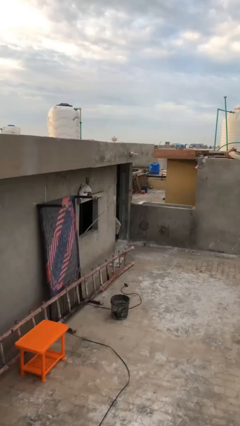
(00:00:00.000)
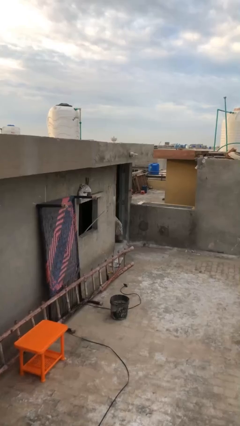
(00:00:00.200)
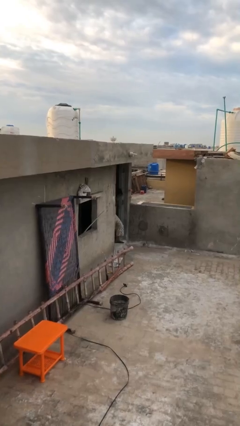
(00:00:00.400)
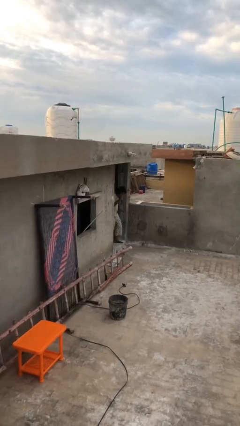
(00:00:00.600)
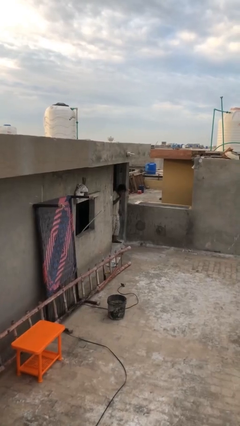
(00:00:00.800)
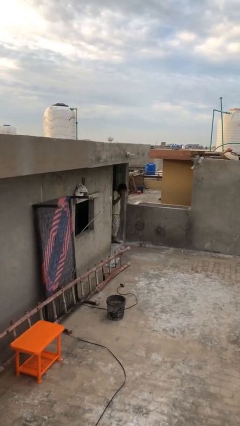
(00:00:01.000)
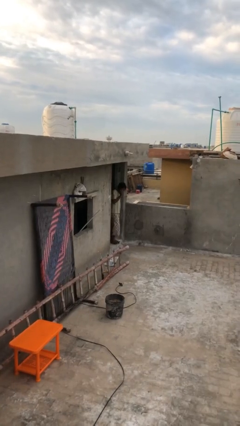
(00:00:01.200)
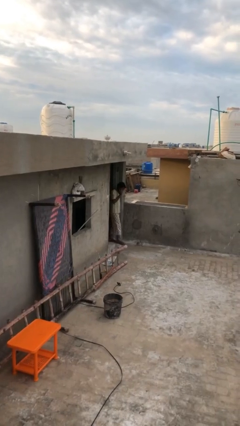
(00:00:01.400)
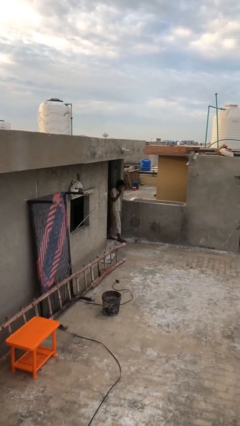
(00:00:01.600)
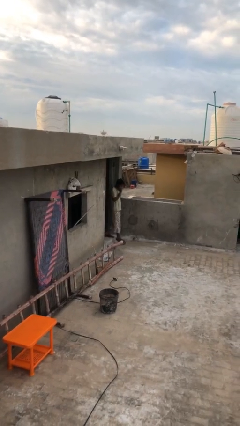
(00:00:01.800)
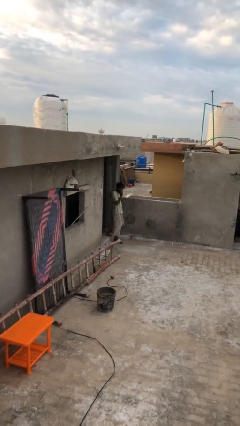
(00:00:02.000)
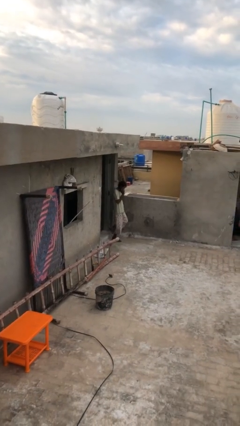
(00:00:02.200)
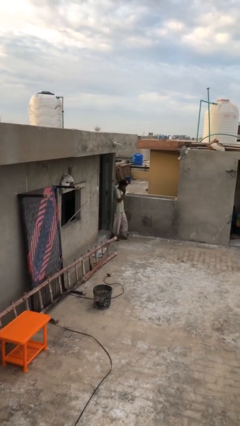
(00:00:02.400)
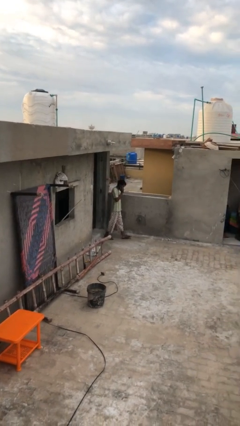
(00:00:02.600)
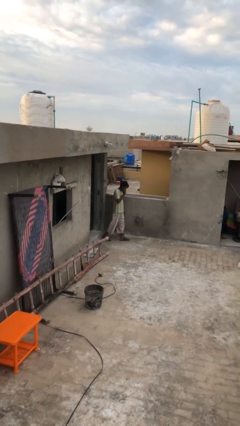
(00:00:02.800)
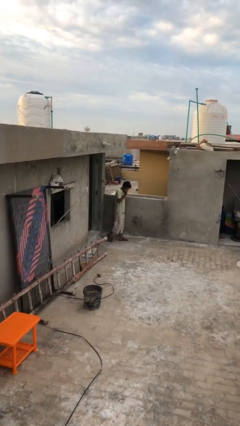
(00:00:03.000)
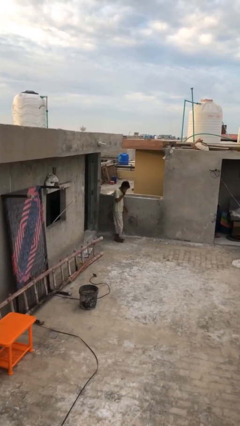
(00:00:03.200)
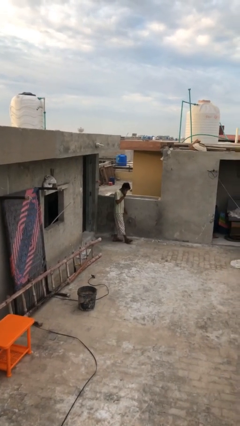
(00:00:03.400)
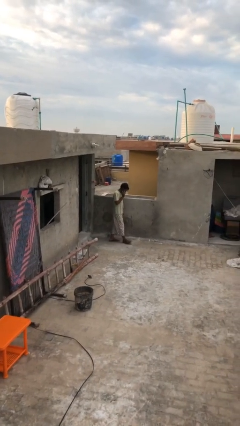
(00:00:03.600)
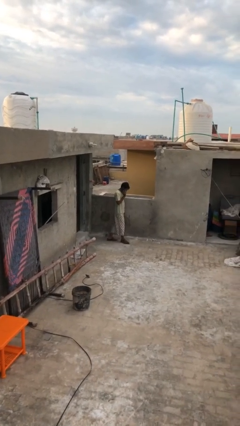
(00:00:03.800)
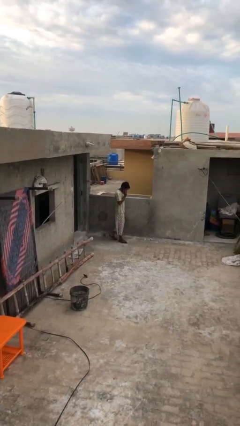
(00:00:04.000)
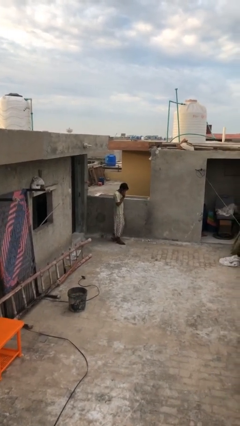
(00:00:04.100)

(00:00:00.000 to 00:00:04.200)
person enters scene through structure

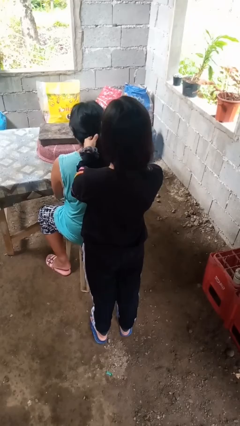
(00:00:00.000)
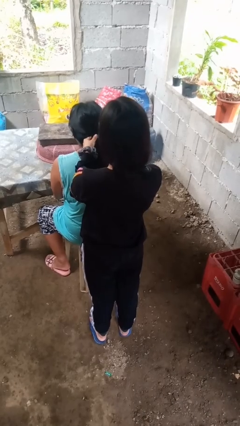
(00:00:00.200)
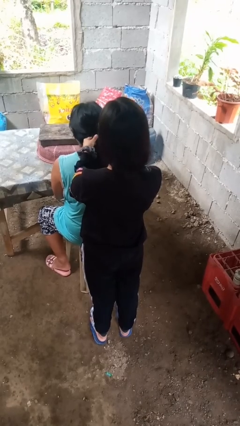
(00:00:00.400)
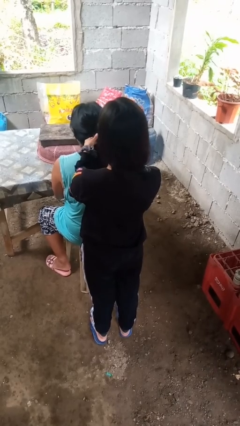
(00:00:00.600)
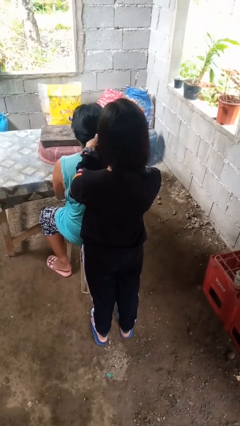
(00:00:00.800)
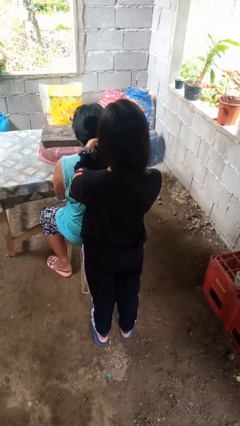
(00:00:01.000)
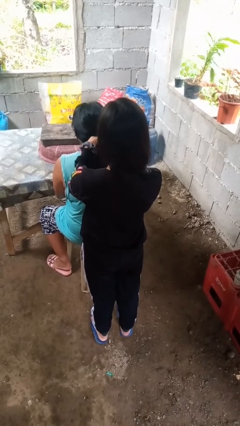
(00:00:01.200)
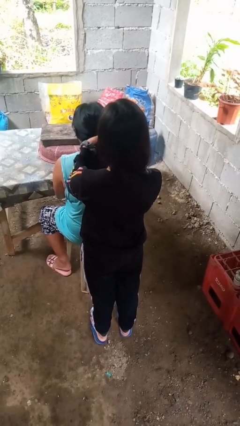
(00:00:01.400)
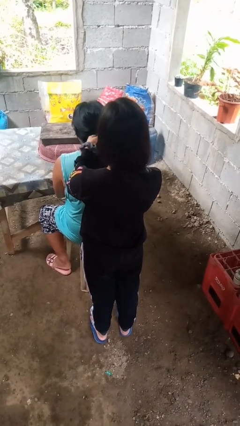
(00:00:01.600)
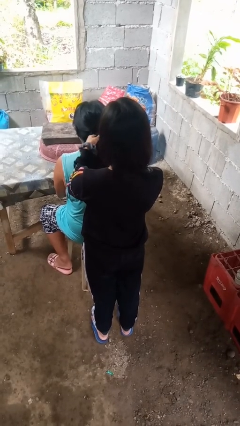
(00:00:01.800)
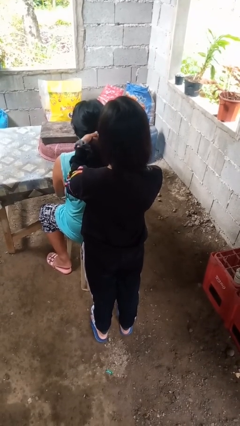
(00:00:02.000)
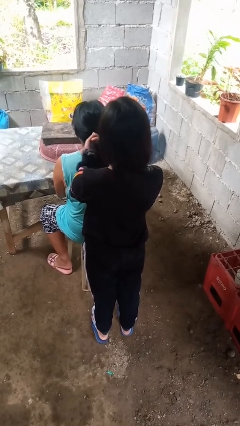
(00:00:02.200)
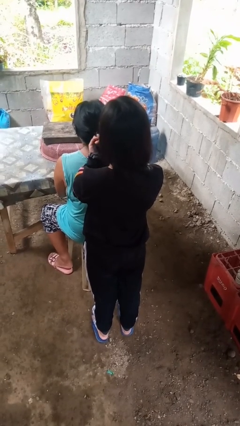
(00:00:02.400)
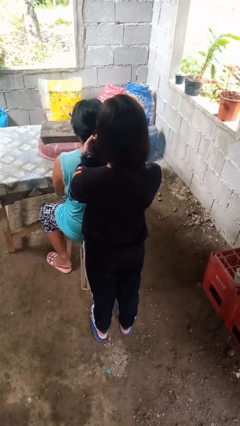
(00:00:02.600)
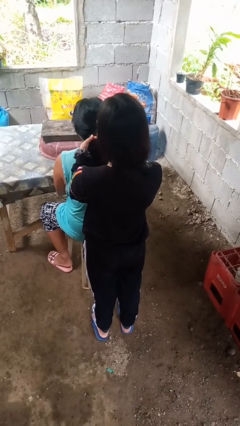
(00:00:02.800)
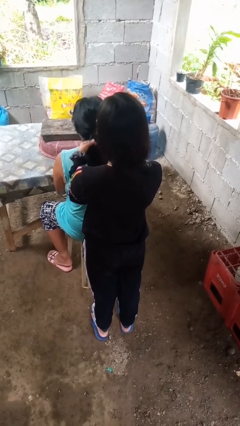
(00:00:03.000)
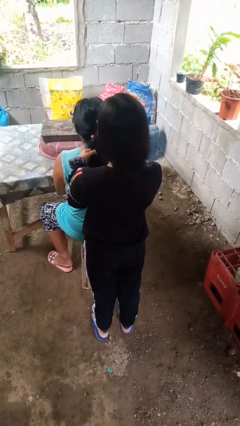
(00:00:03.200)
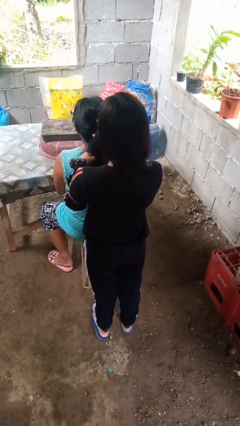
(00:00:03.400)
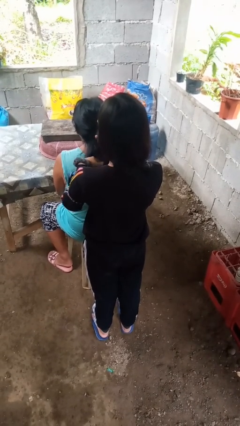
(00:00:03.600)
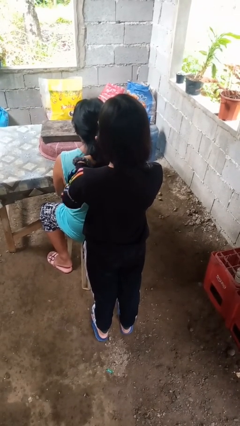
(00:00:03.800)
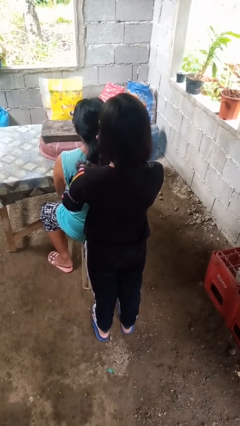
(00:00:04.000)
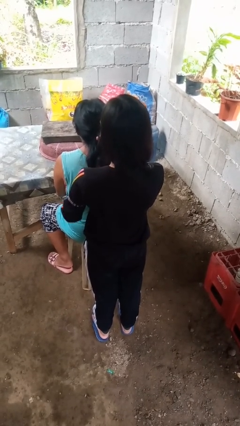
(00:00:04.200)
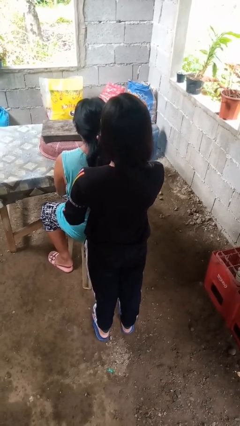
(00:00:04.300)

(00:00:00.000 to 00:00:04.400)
person braids hair of person

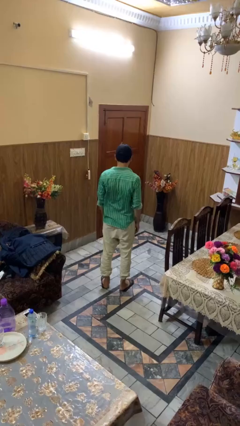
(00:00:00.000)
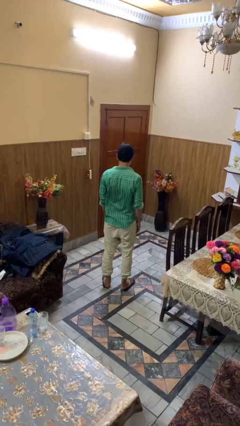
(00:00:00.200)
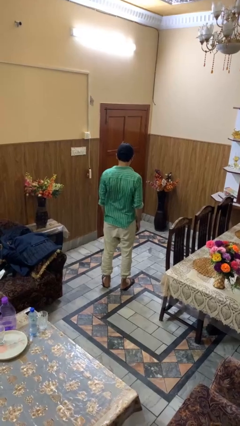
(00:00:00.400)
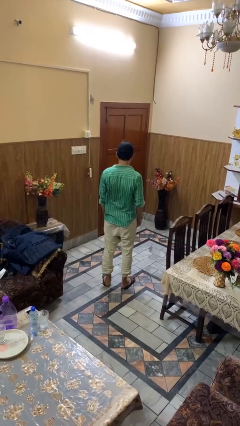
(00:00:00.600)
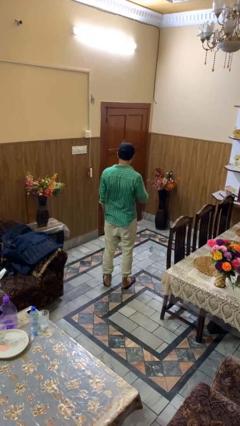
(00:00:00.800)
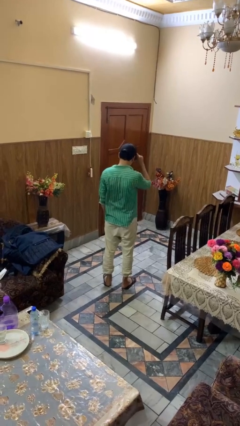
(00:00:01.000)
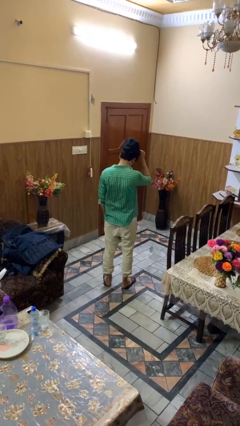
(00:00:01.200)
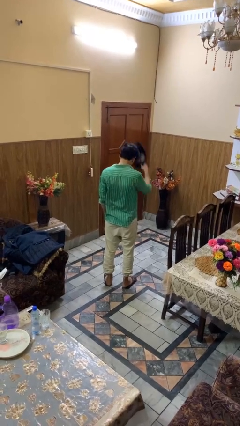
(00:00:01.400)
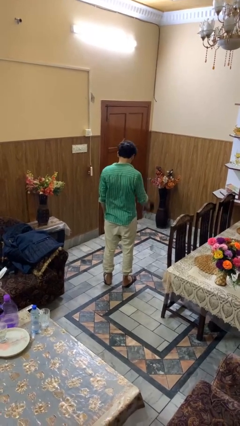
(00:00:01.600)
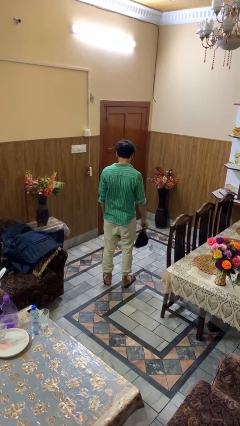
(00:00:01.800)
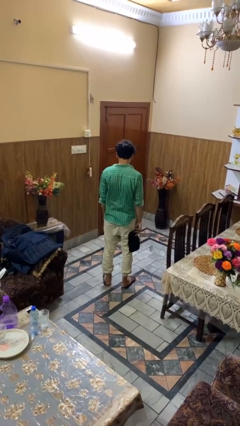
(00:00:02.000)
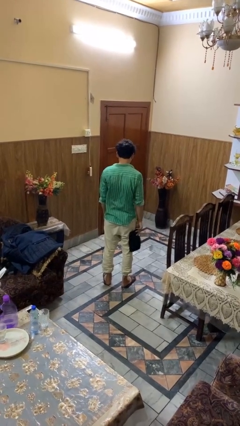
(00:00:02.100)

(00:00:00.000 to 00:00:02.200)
person takes off hat

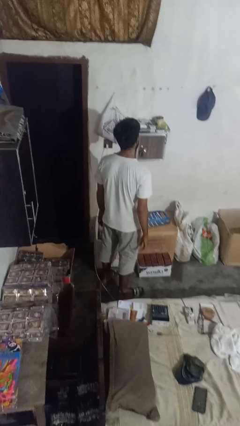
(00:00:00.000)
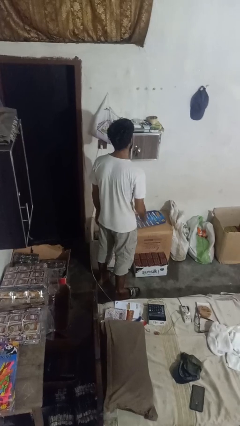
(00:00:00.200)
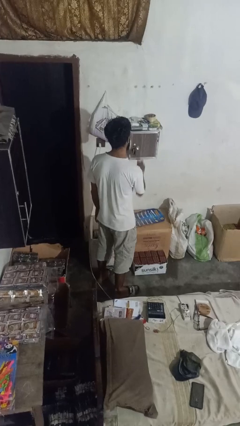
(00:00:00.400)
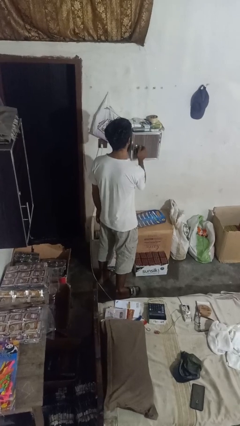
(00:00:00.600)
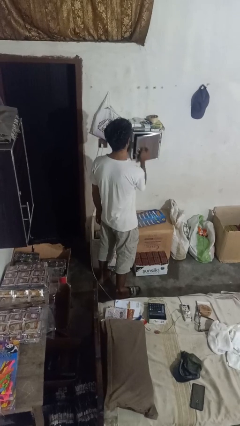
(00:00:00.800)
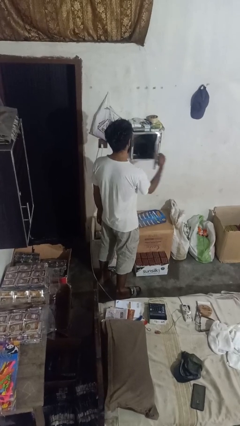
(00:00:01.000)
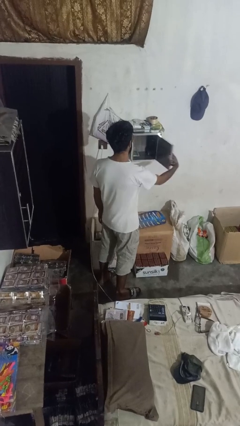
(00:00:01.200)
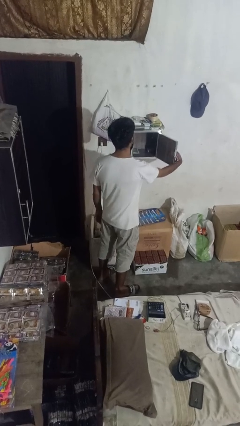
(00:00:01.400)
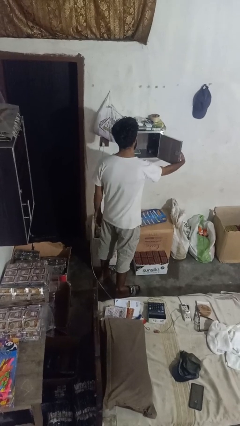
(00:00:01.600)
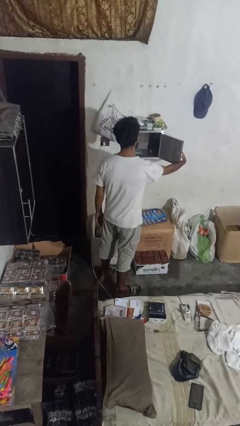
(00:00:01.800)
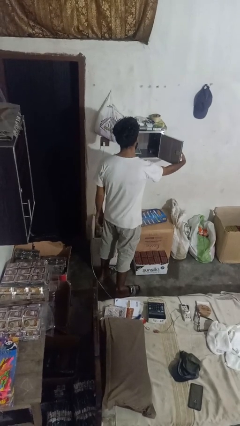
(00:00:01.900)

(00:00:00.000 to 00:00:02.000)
person picks up object from cabinet

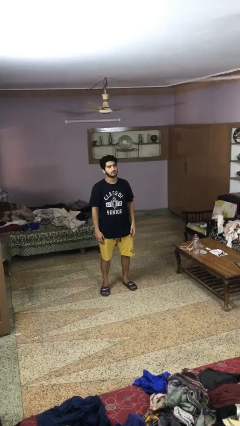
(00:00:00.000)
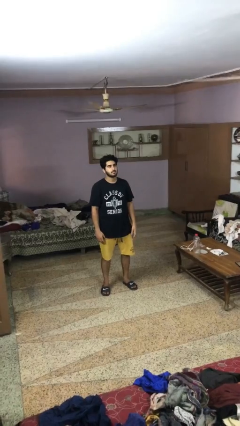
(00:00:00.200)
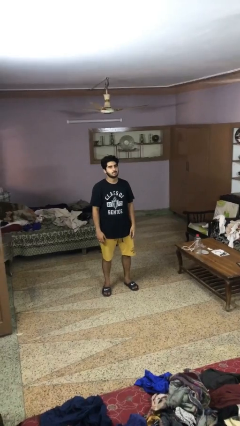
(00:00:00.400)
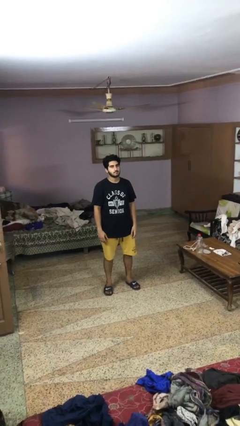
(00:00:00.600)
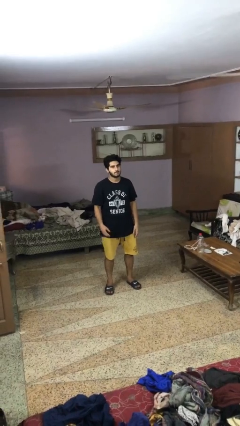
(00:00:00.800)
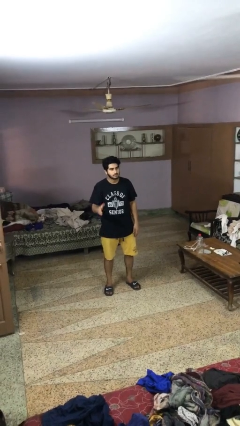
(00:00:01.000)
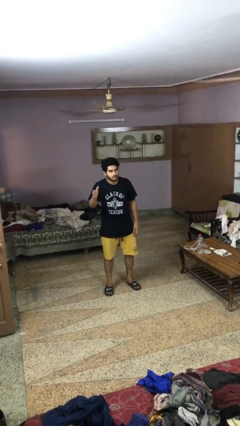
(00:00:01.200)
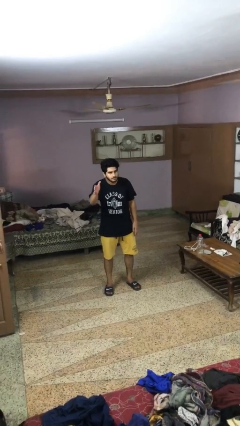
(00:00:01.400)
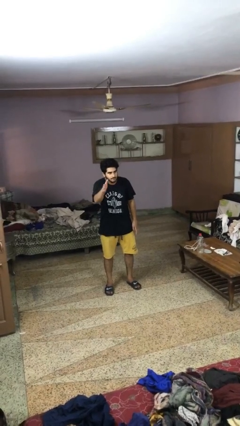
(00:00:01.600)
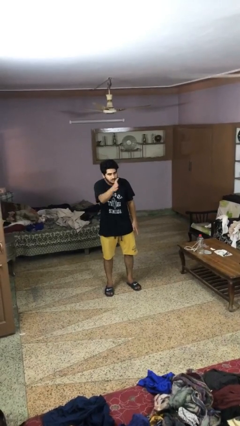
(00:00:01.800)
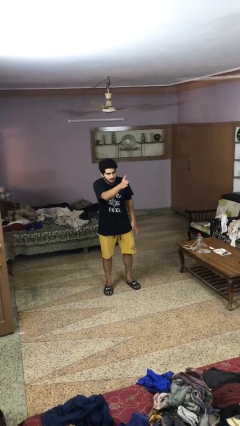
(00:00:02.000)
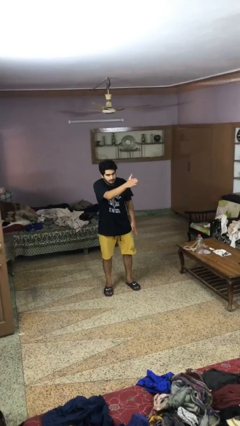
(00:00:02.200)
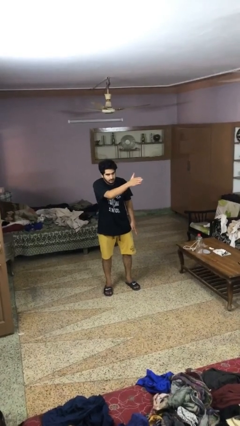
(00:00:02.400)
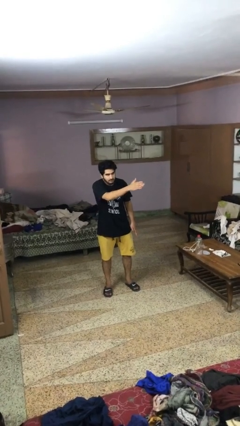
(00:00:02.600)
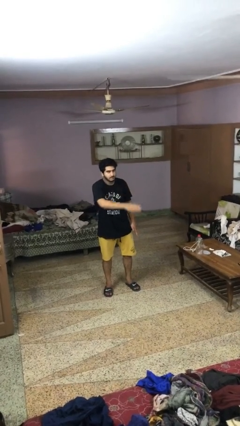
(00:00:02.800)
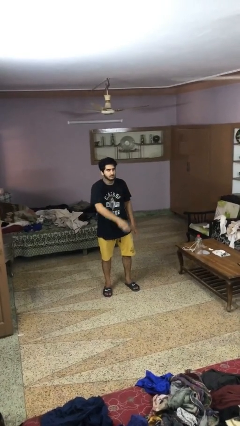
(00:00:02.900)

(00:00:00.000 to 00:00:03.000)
person gestures swipe left

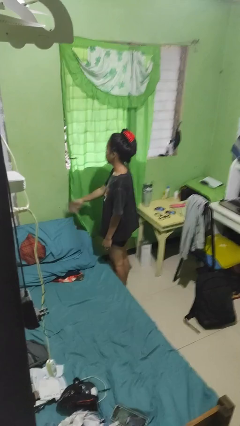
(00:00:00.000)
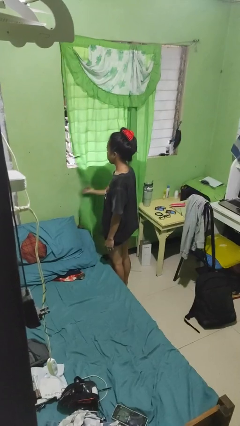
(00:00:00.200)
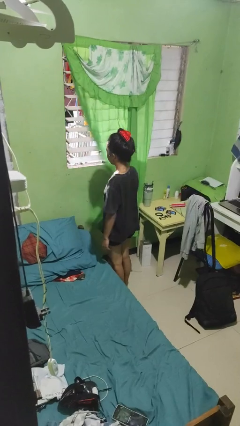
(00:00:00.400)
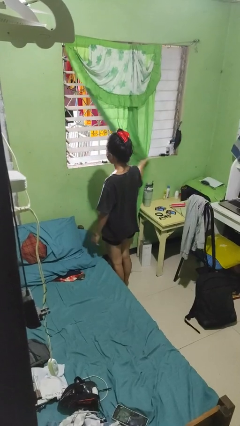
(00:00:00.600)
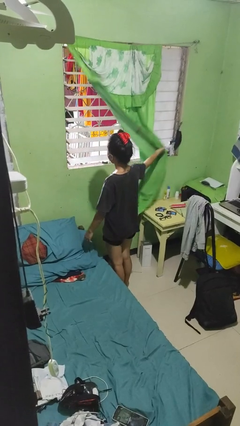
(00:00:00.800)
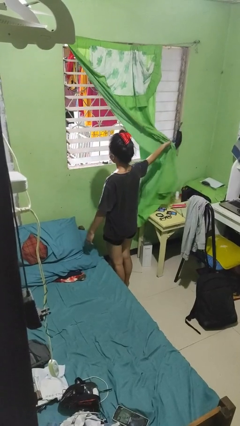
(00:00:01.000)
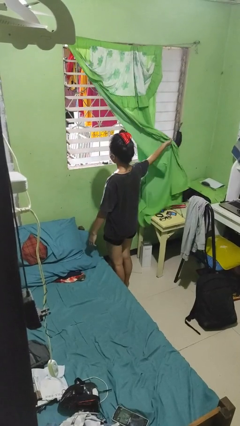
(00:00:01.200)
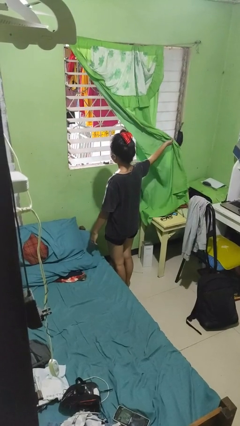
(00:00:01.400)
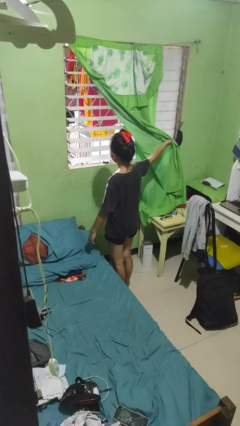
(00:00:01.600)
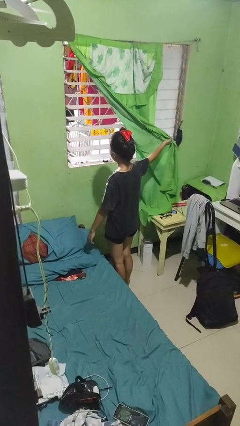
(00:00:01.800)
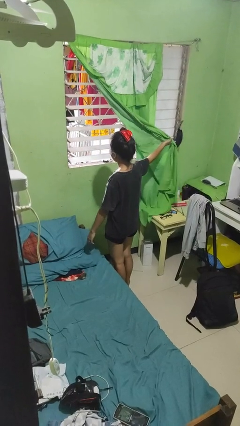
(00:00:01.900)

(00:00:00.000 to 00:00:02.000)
person opens curtains
